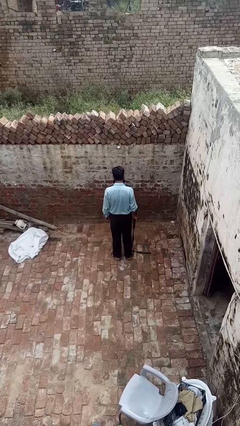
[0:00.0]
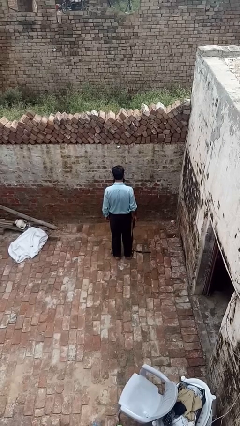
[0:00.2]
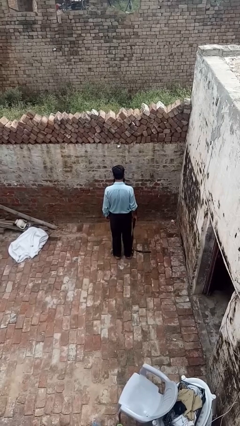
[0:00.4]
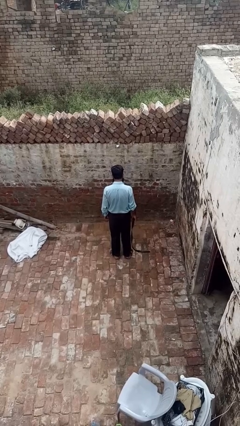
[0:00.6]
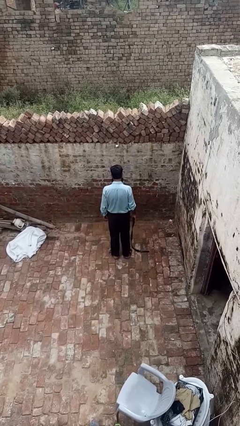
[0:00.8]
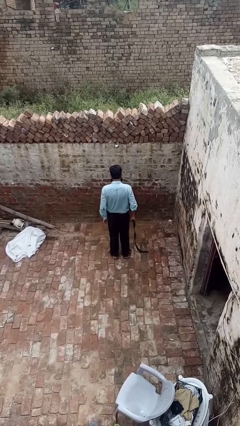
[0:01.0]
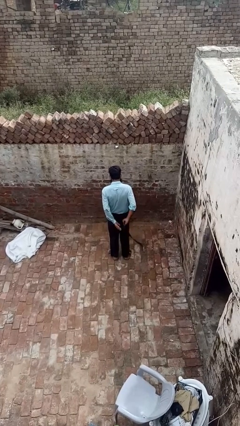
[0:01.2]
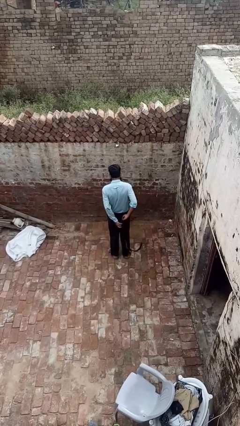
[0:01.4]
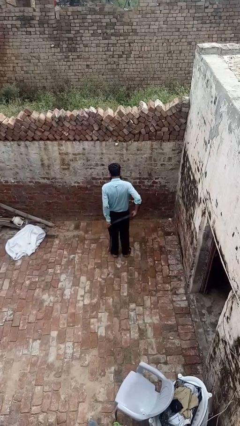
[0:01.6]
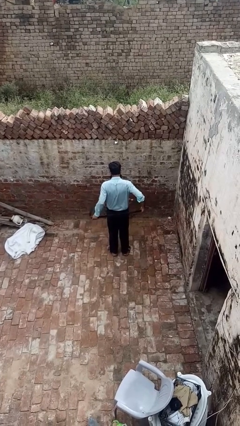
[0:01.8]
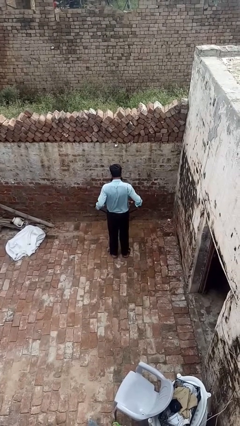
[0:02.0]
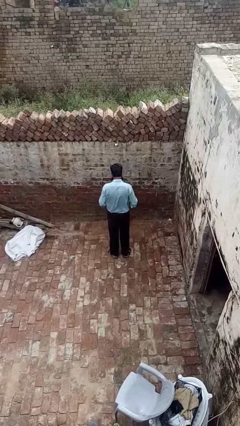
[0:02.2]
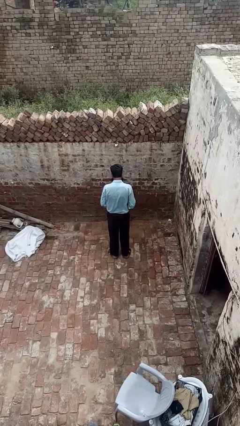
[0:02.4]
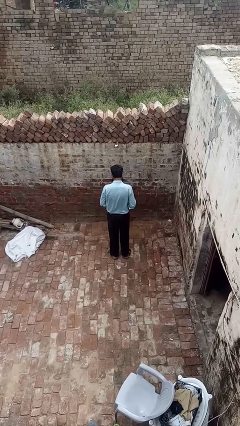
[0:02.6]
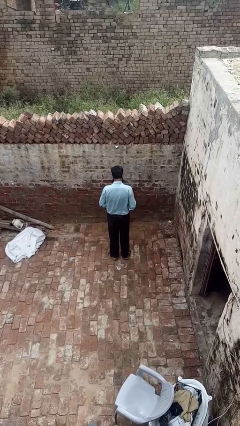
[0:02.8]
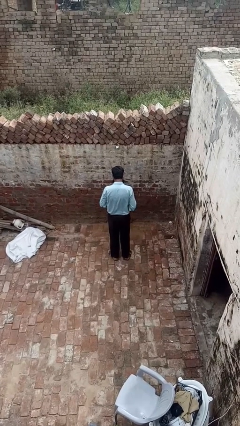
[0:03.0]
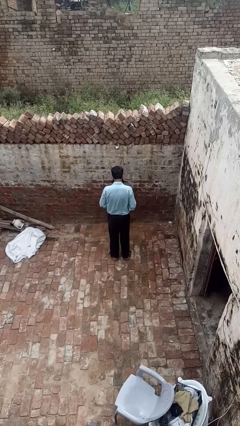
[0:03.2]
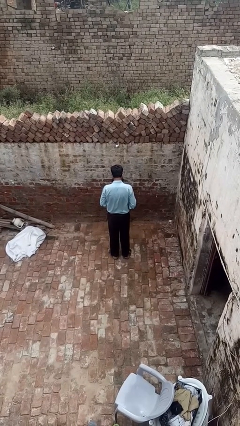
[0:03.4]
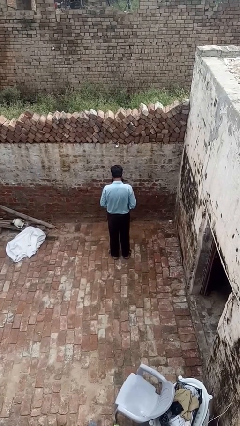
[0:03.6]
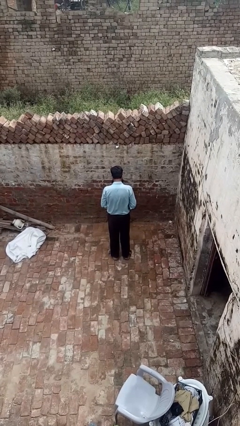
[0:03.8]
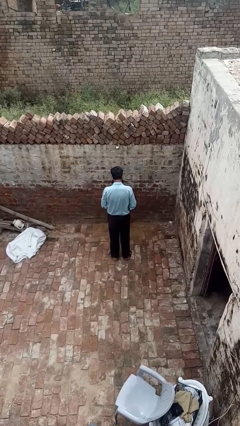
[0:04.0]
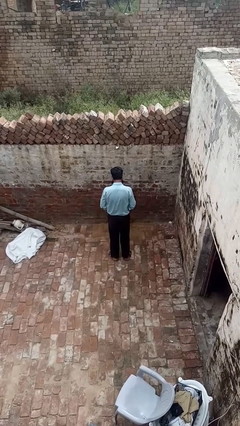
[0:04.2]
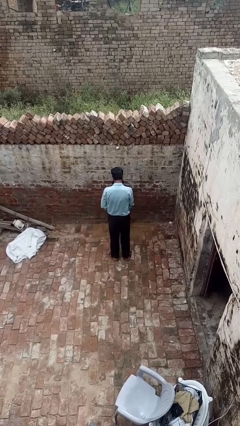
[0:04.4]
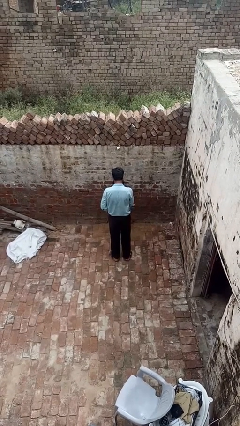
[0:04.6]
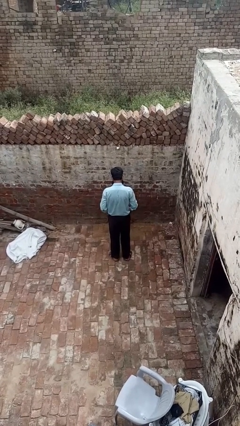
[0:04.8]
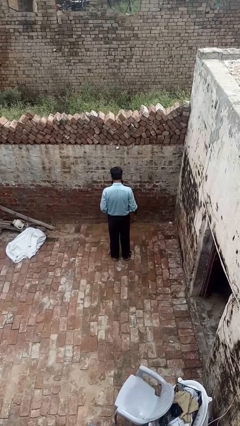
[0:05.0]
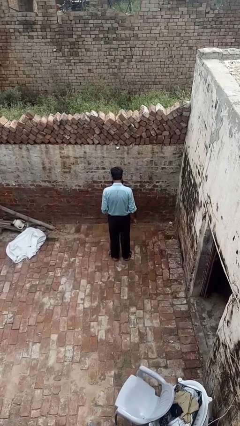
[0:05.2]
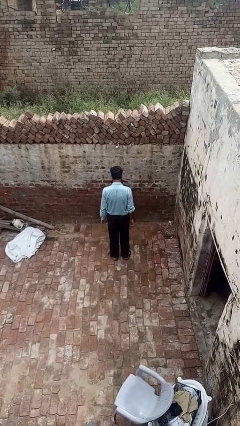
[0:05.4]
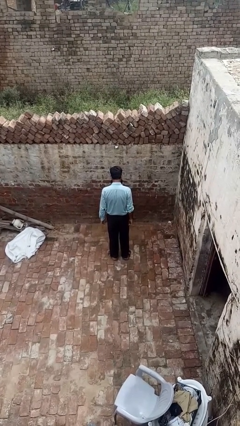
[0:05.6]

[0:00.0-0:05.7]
person puts on belt

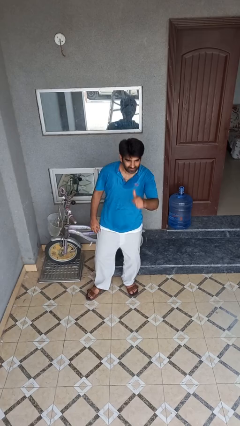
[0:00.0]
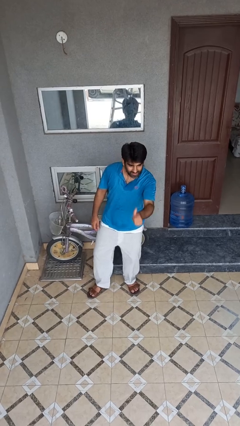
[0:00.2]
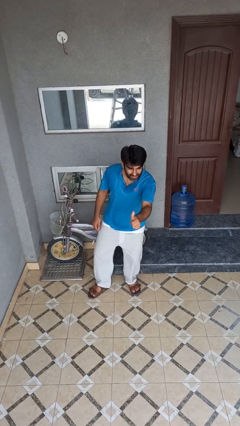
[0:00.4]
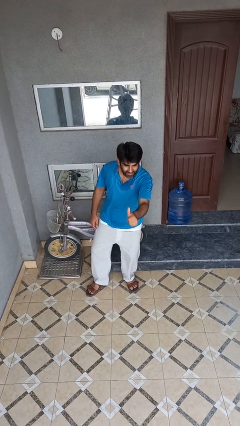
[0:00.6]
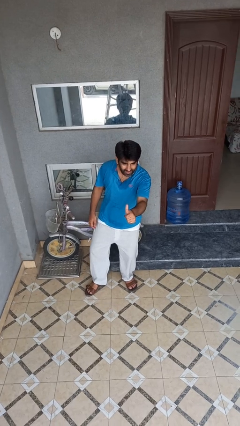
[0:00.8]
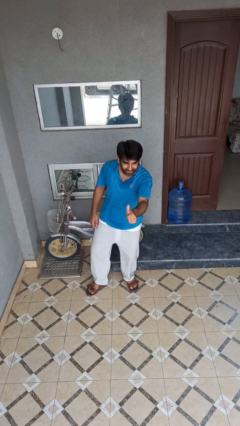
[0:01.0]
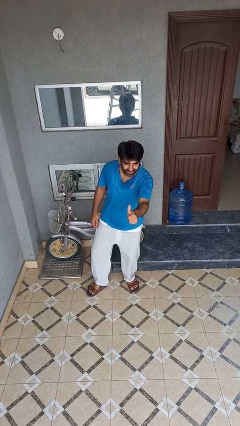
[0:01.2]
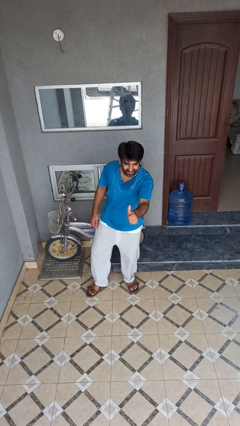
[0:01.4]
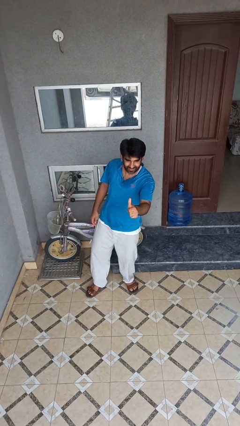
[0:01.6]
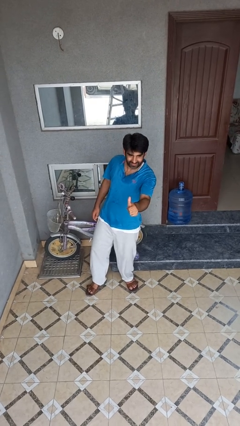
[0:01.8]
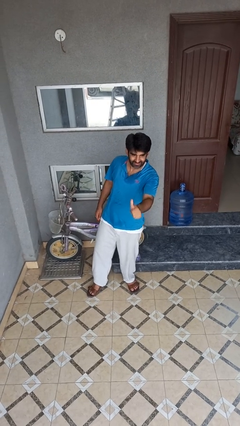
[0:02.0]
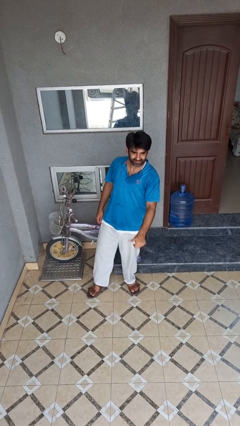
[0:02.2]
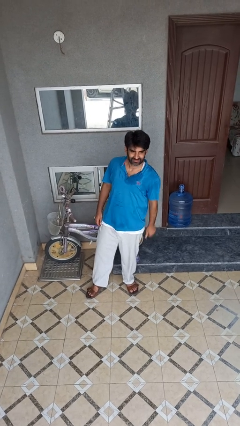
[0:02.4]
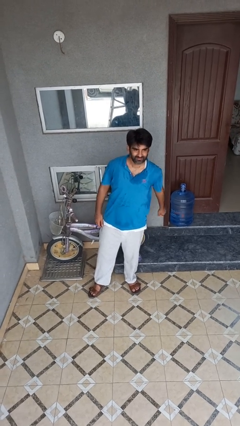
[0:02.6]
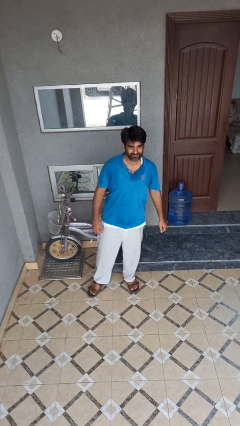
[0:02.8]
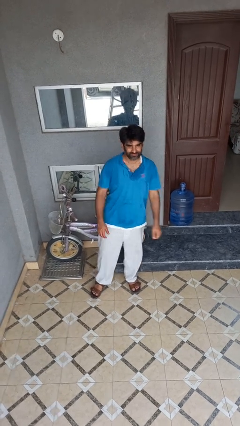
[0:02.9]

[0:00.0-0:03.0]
person gestures thumbs up

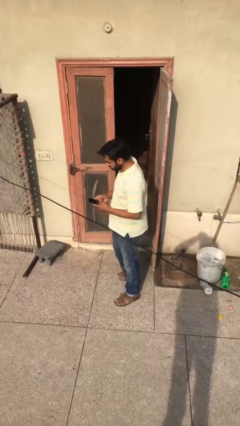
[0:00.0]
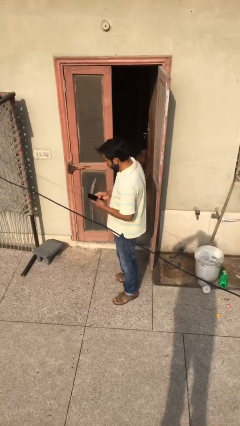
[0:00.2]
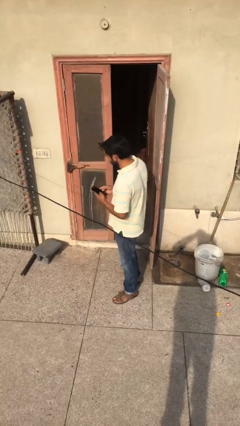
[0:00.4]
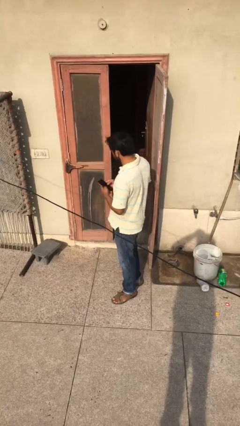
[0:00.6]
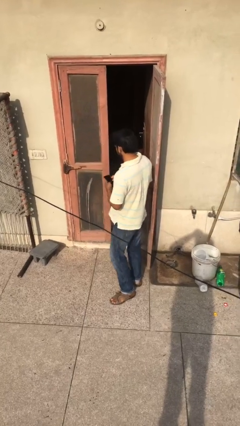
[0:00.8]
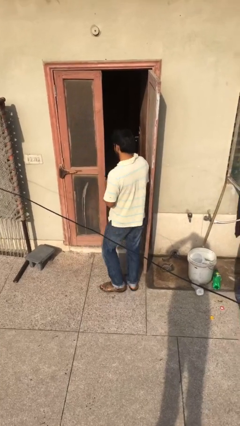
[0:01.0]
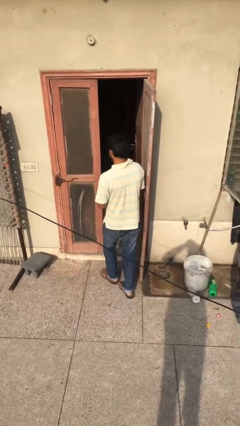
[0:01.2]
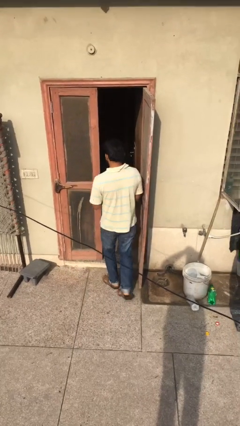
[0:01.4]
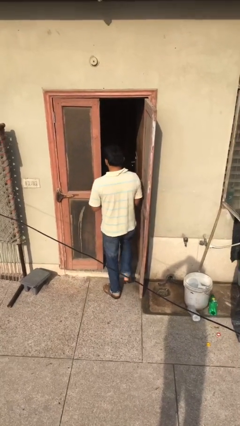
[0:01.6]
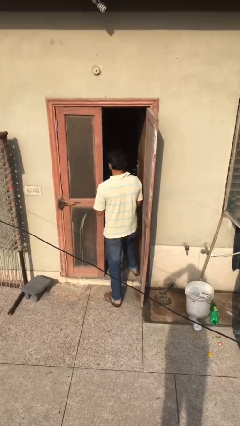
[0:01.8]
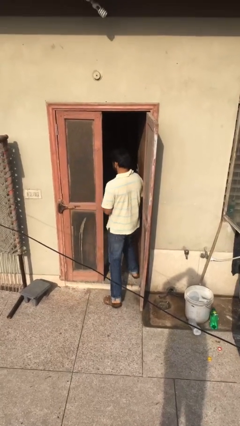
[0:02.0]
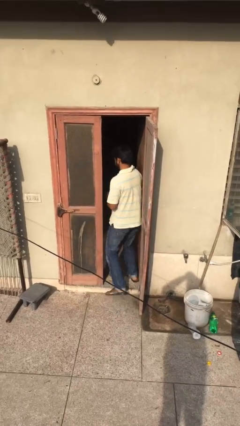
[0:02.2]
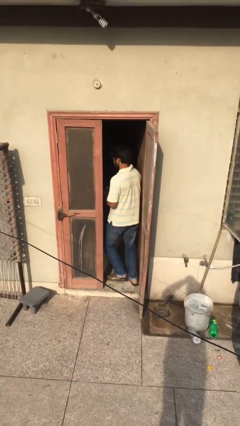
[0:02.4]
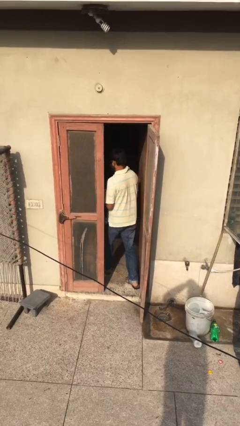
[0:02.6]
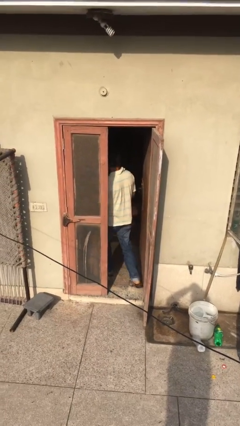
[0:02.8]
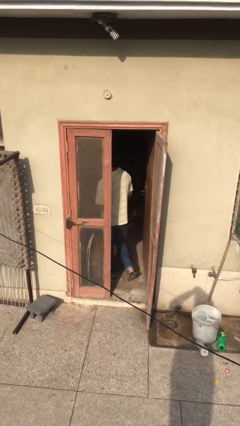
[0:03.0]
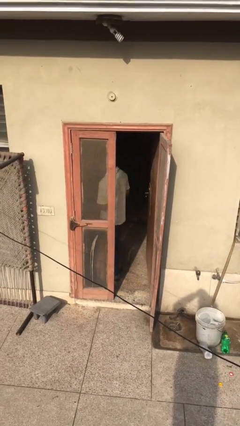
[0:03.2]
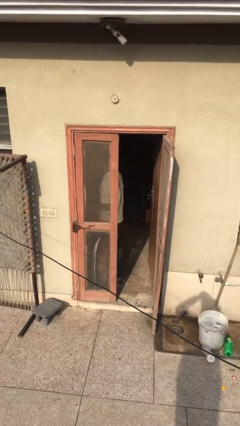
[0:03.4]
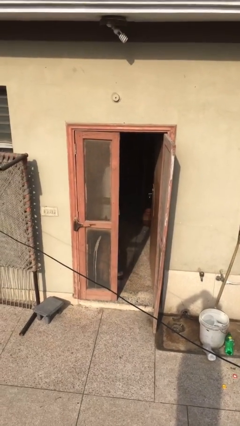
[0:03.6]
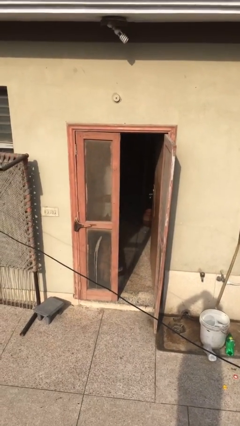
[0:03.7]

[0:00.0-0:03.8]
person exits scene through structure

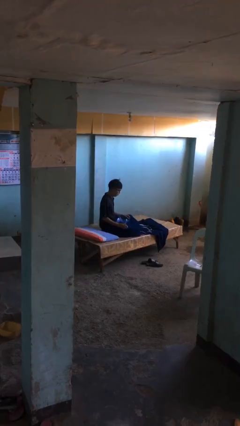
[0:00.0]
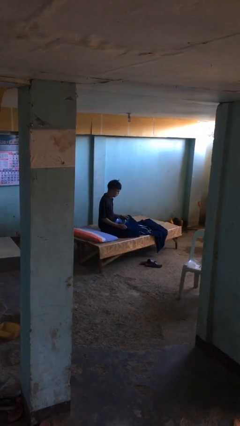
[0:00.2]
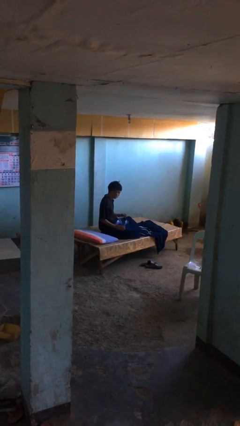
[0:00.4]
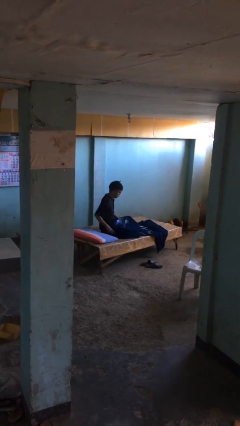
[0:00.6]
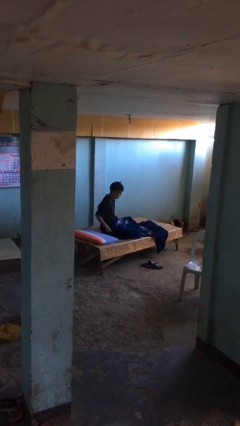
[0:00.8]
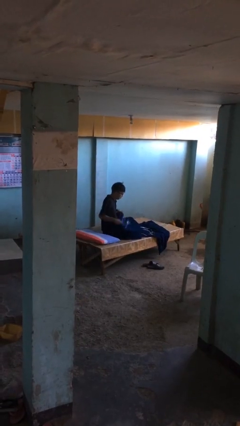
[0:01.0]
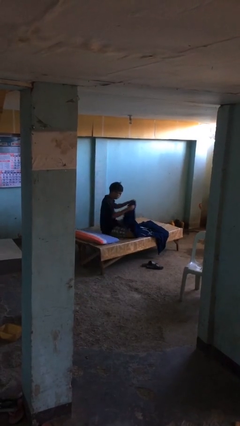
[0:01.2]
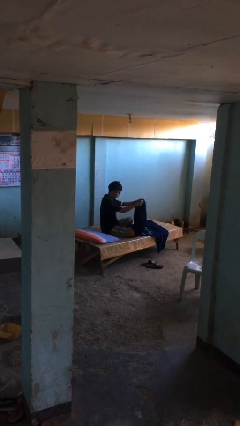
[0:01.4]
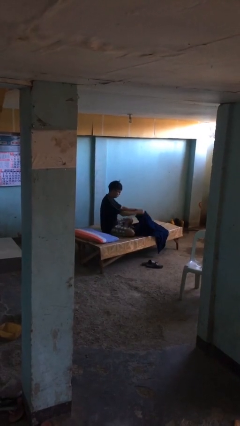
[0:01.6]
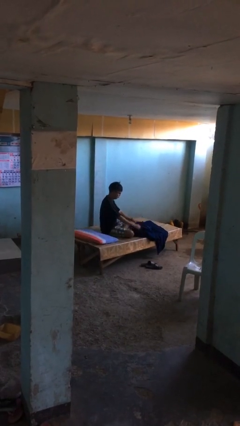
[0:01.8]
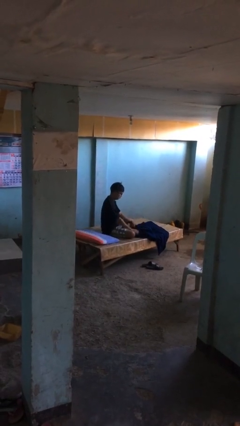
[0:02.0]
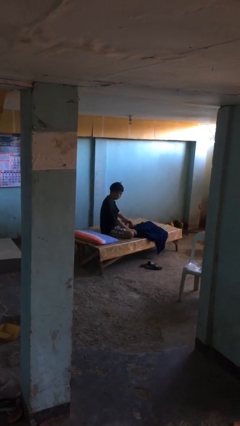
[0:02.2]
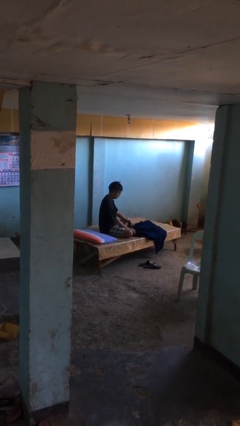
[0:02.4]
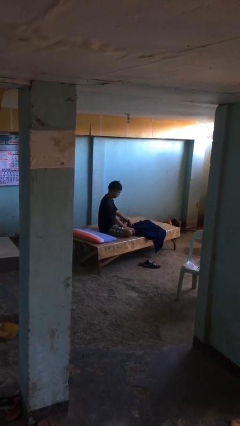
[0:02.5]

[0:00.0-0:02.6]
person uncovers with blanket

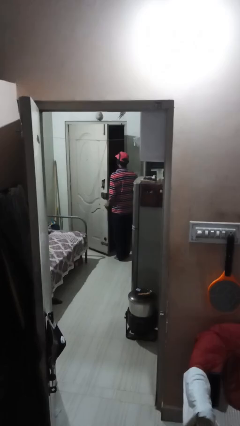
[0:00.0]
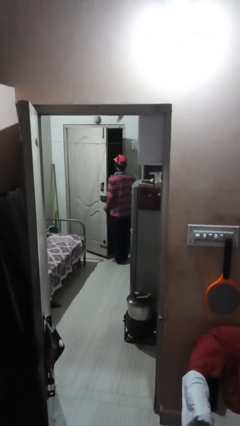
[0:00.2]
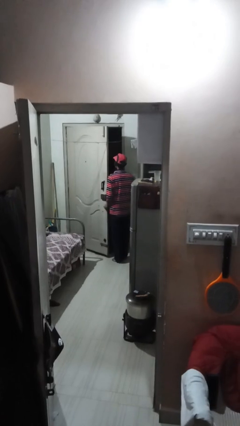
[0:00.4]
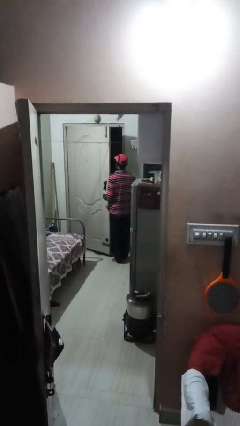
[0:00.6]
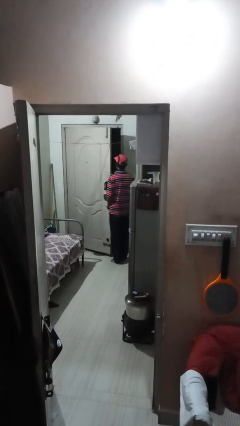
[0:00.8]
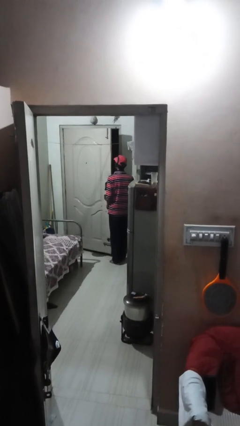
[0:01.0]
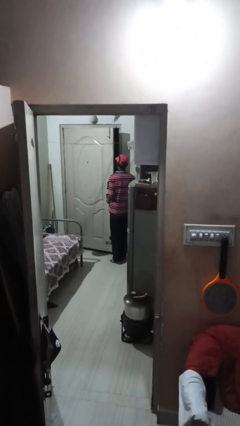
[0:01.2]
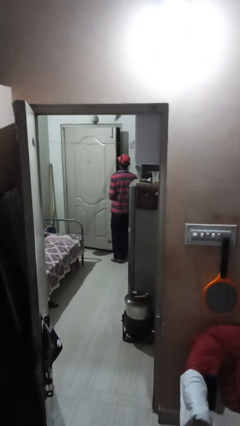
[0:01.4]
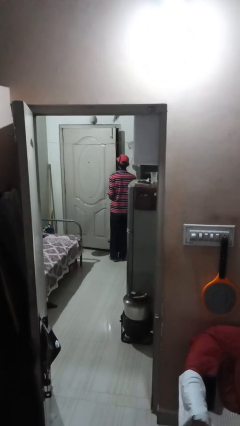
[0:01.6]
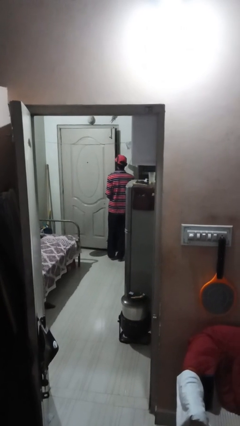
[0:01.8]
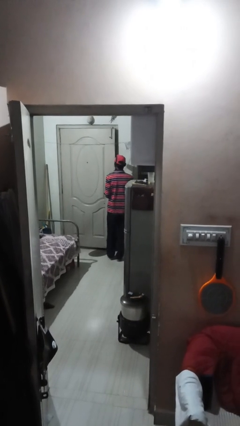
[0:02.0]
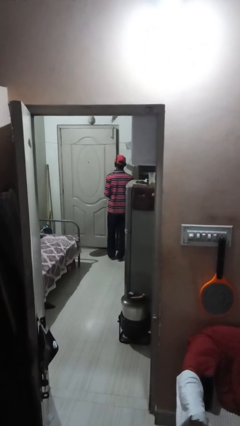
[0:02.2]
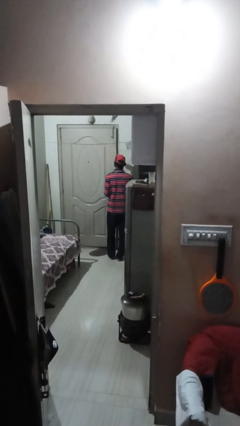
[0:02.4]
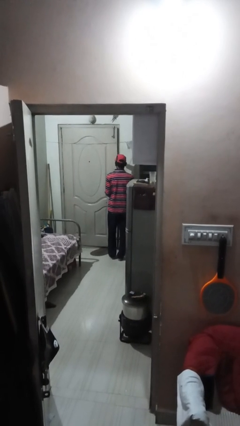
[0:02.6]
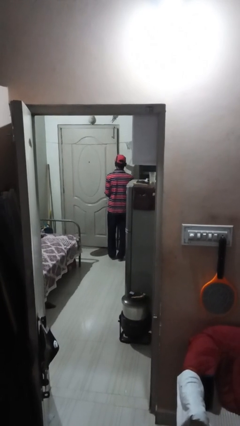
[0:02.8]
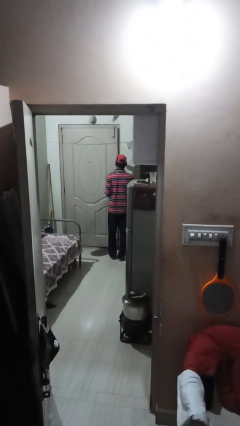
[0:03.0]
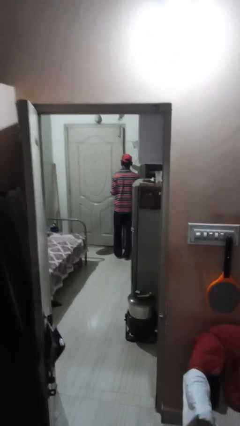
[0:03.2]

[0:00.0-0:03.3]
person closes facility door
